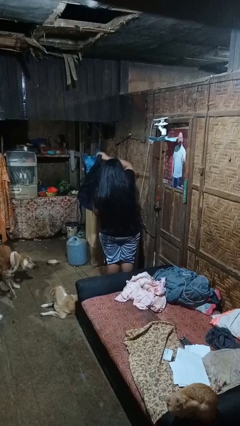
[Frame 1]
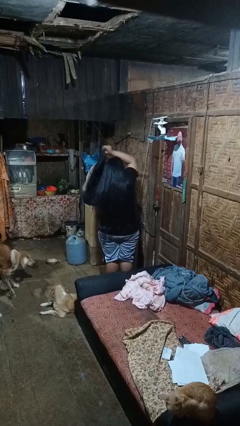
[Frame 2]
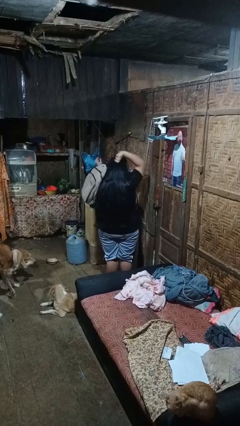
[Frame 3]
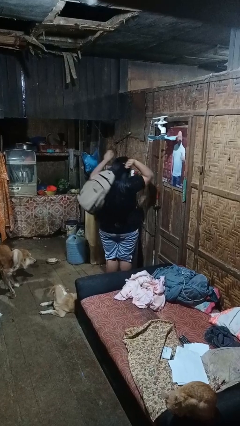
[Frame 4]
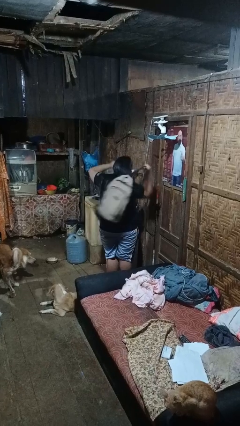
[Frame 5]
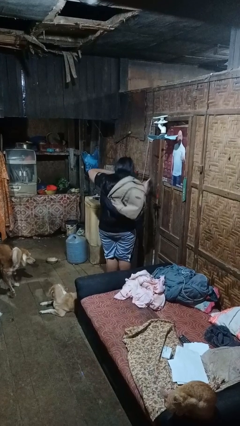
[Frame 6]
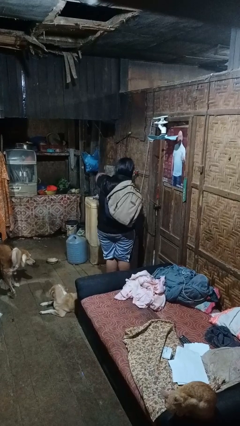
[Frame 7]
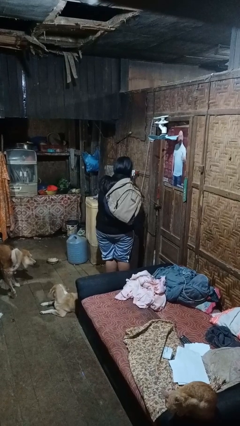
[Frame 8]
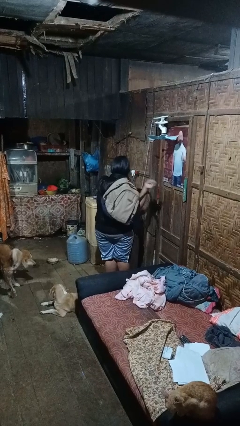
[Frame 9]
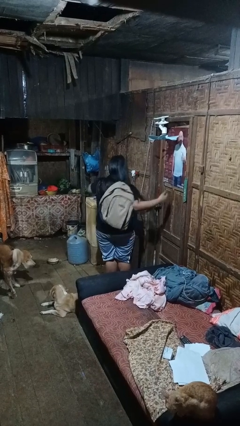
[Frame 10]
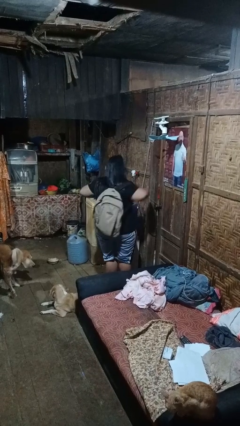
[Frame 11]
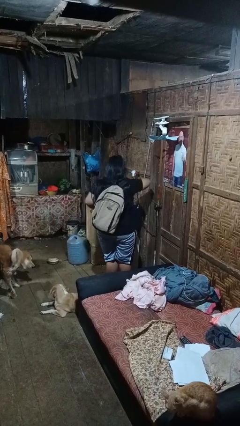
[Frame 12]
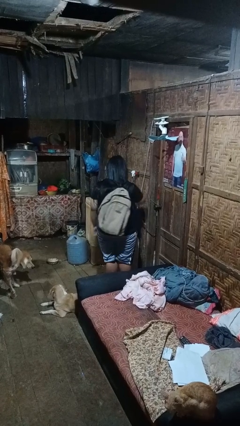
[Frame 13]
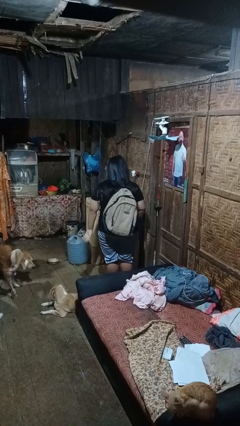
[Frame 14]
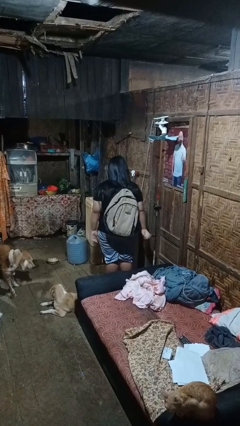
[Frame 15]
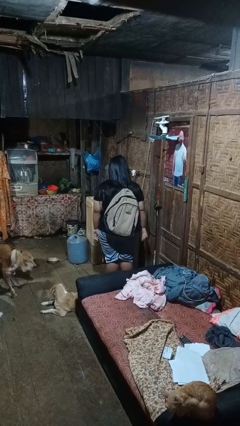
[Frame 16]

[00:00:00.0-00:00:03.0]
person puts on backpack

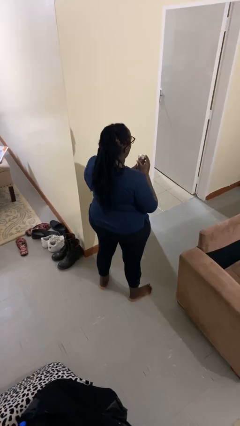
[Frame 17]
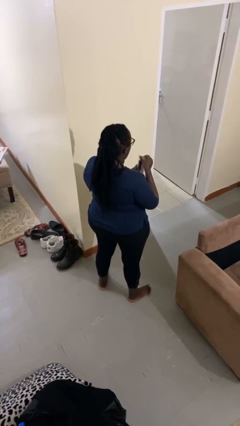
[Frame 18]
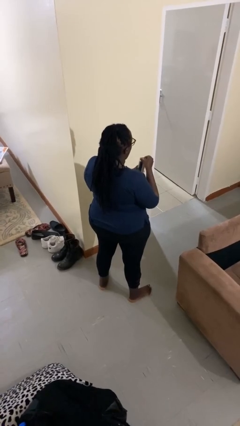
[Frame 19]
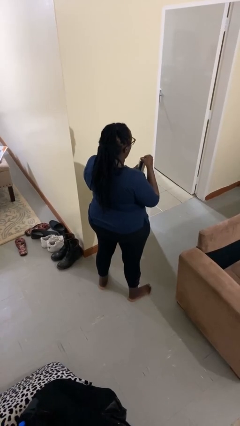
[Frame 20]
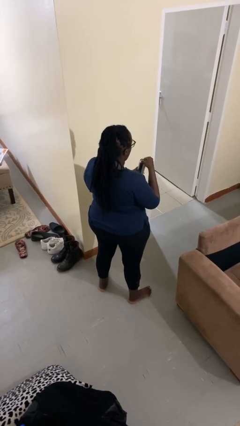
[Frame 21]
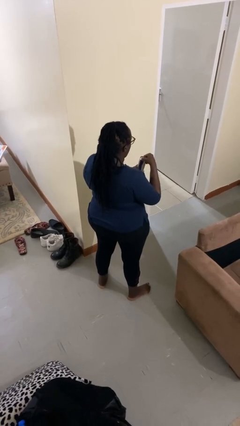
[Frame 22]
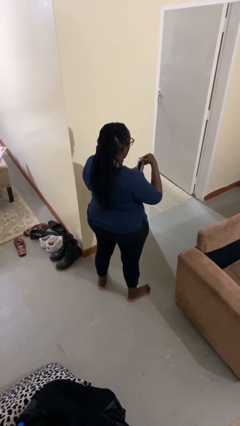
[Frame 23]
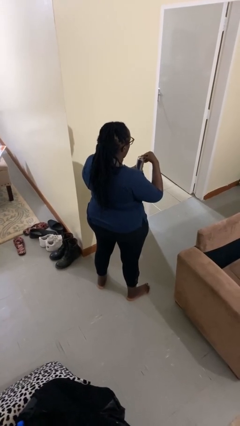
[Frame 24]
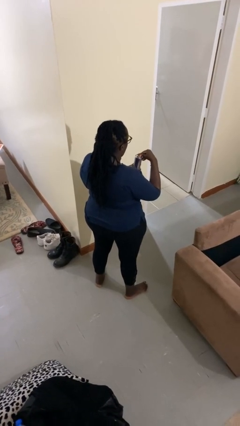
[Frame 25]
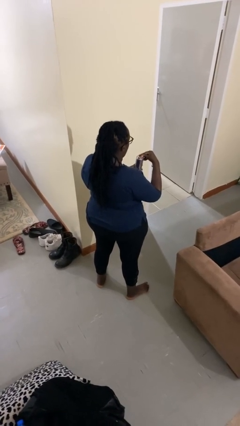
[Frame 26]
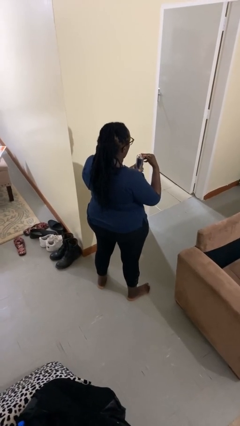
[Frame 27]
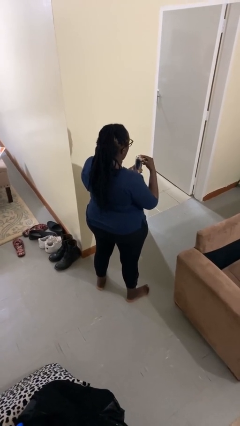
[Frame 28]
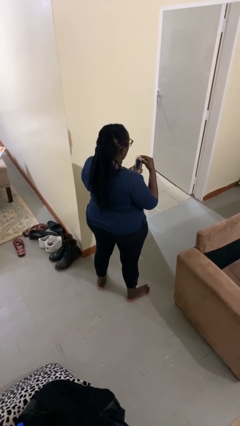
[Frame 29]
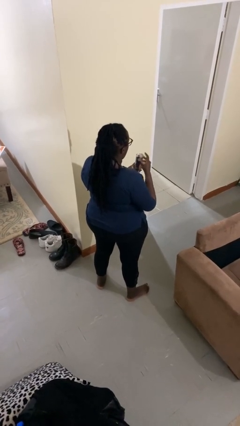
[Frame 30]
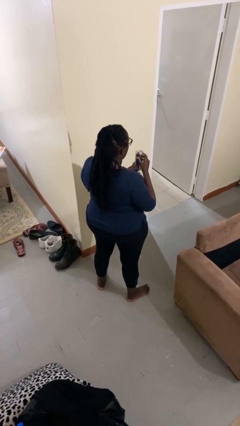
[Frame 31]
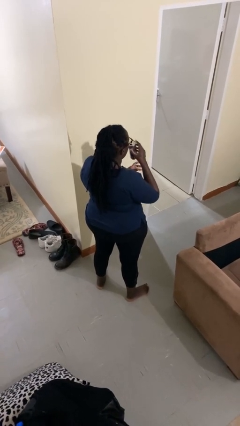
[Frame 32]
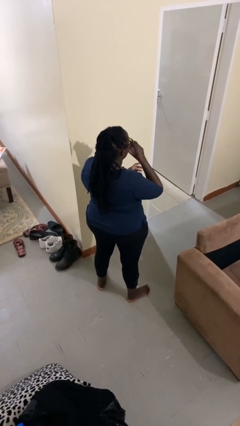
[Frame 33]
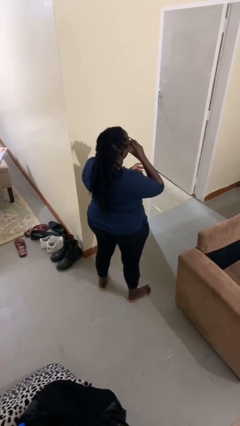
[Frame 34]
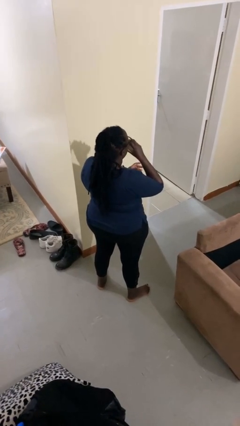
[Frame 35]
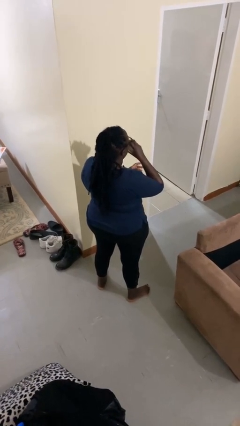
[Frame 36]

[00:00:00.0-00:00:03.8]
person opens beverage can

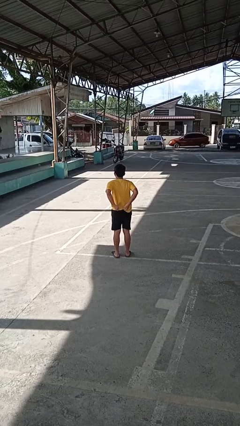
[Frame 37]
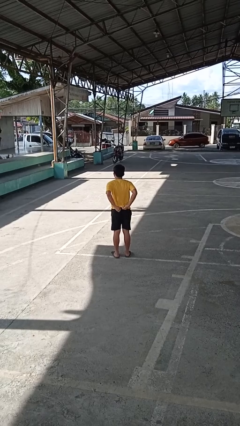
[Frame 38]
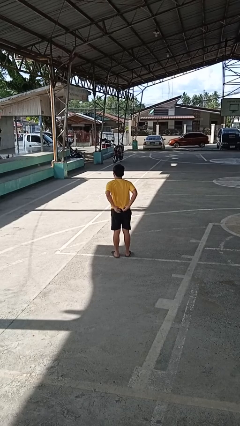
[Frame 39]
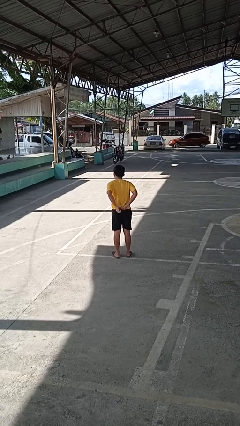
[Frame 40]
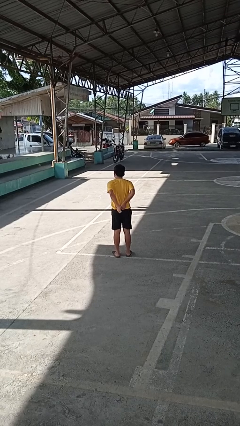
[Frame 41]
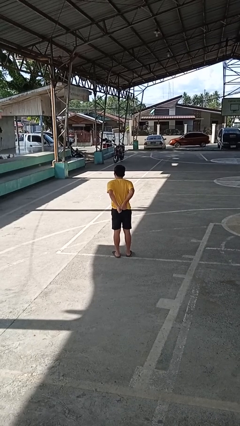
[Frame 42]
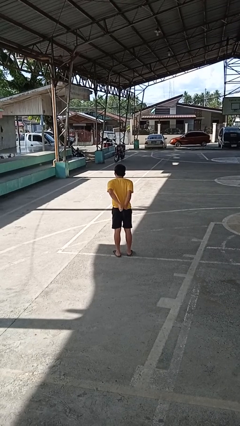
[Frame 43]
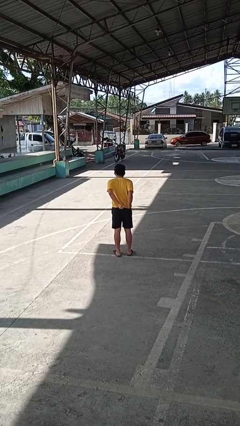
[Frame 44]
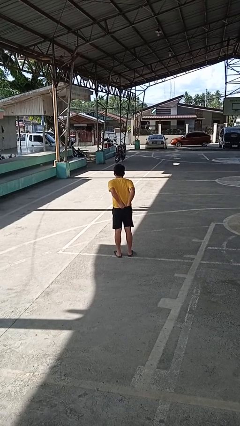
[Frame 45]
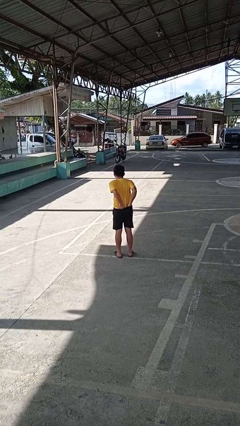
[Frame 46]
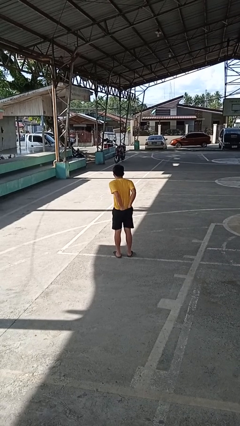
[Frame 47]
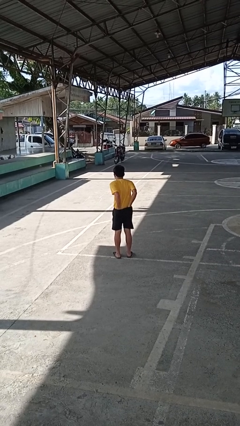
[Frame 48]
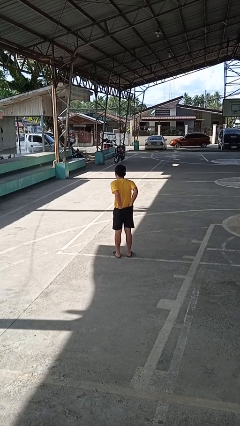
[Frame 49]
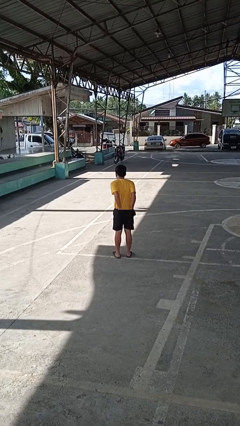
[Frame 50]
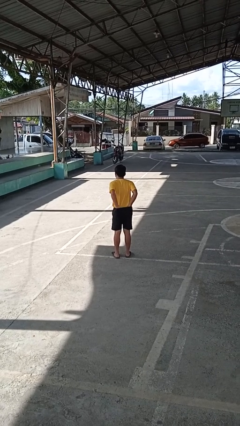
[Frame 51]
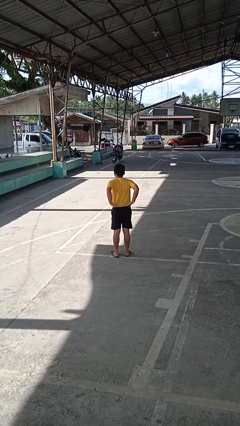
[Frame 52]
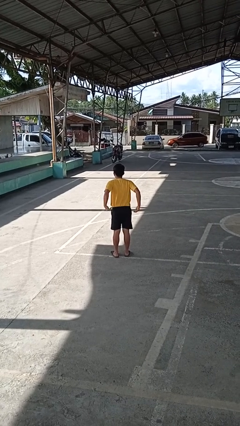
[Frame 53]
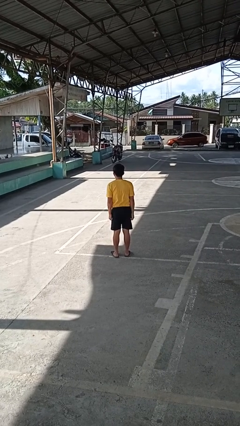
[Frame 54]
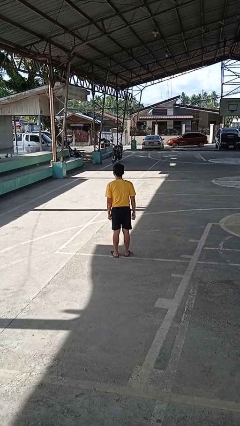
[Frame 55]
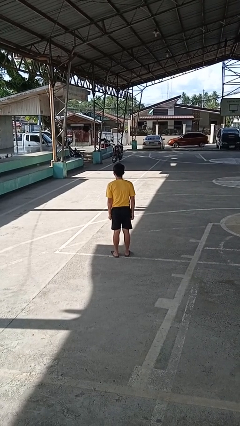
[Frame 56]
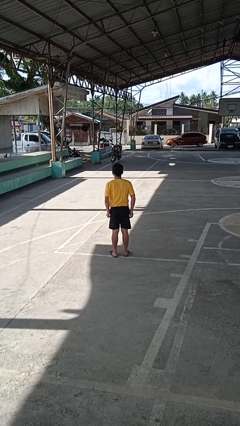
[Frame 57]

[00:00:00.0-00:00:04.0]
person tucks in shirt

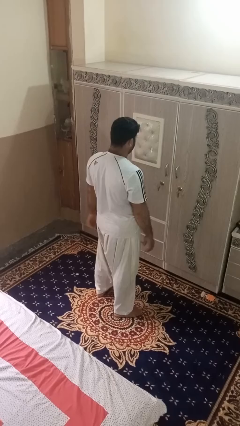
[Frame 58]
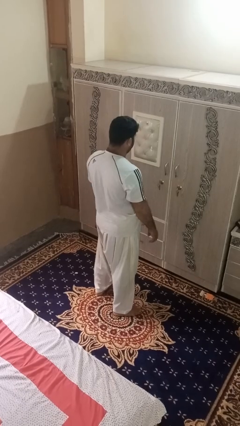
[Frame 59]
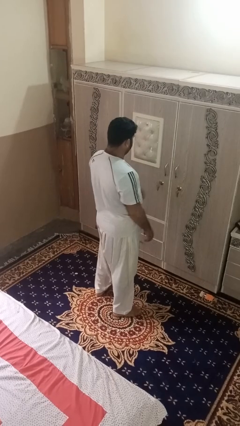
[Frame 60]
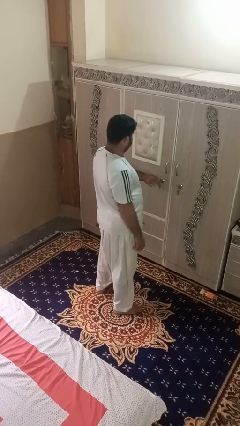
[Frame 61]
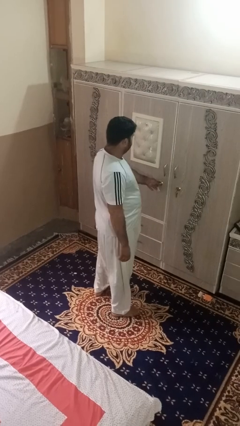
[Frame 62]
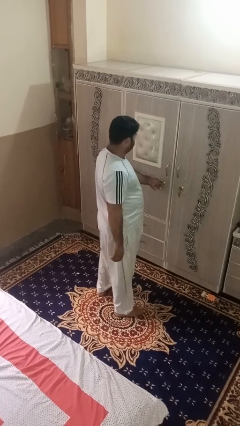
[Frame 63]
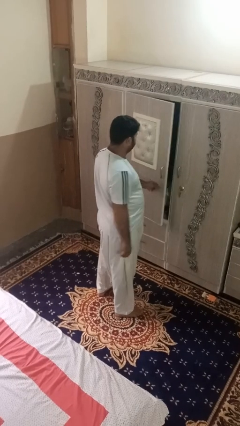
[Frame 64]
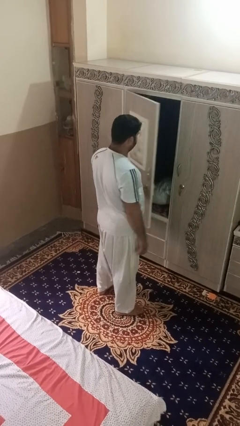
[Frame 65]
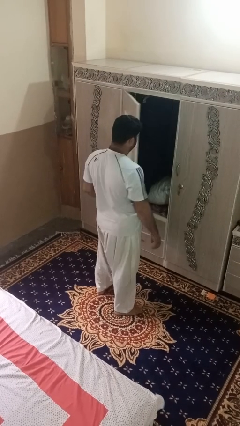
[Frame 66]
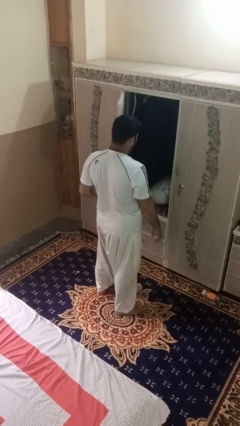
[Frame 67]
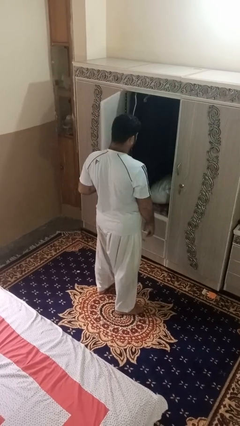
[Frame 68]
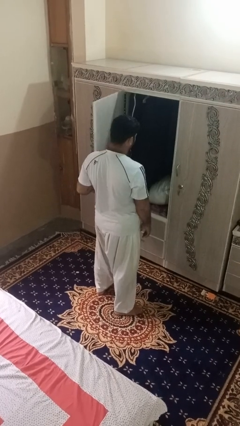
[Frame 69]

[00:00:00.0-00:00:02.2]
person opens dresser drawer

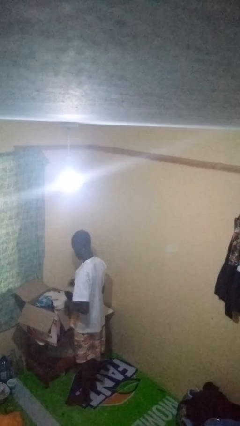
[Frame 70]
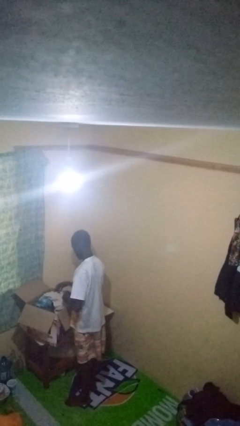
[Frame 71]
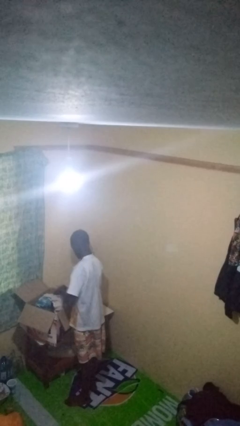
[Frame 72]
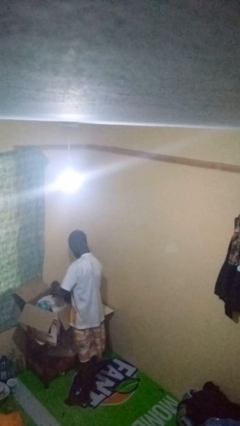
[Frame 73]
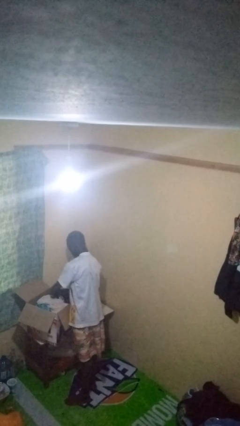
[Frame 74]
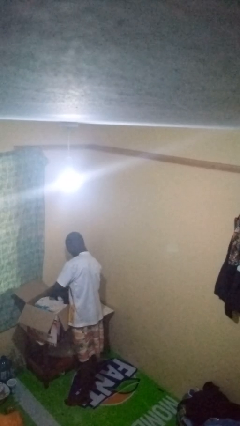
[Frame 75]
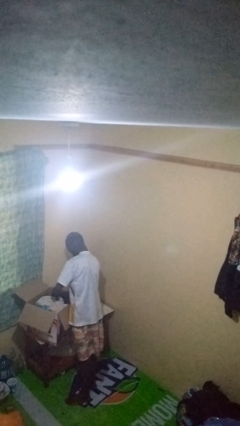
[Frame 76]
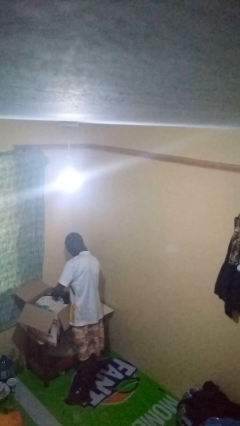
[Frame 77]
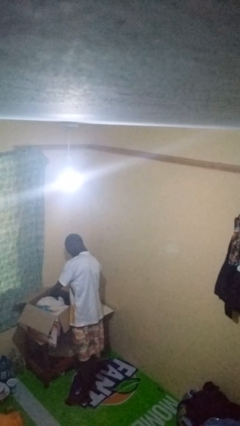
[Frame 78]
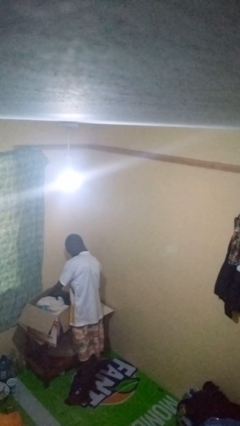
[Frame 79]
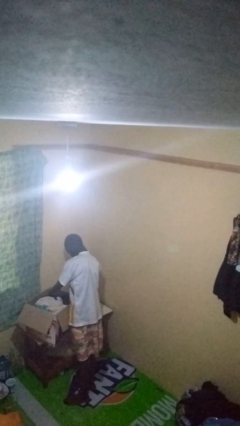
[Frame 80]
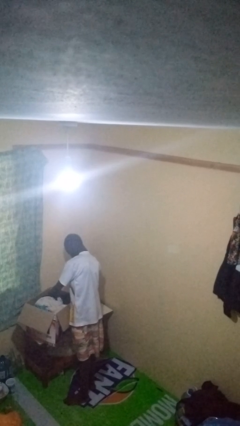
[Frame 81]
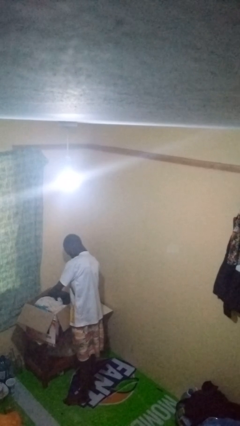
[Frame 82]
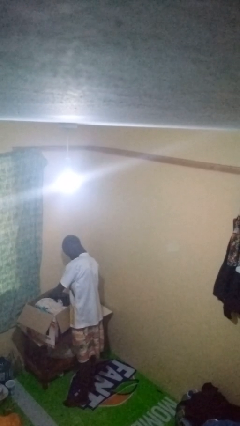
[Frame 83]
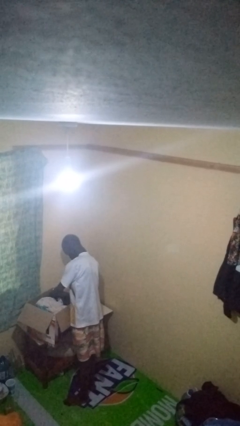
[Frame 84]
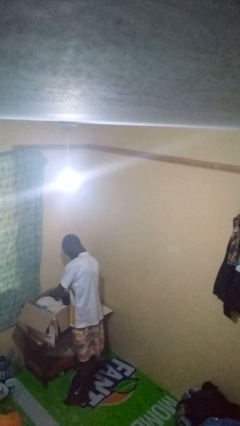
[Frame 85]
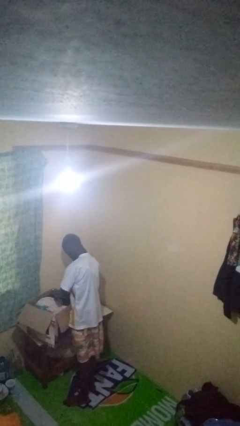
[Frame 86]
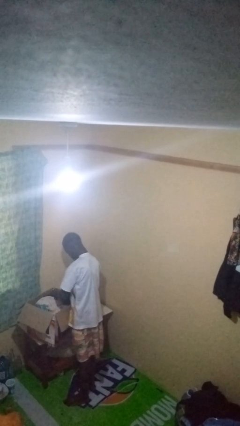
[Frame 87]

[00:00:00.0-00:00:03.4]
person searches in box

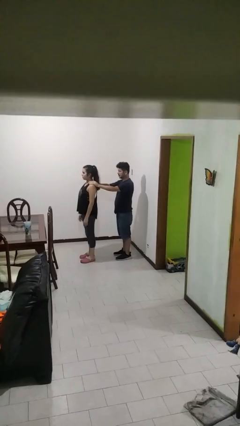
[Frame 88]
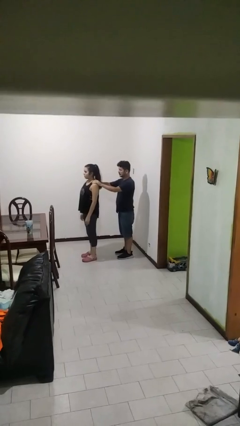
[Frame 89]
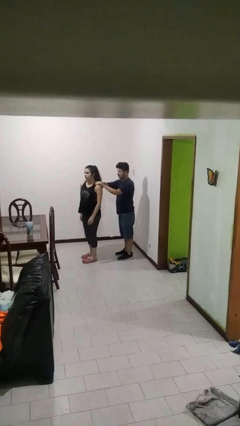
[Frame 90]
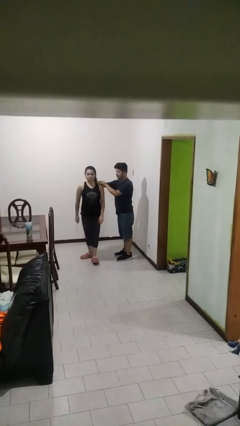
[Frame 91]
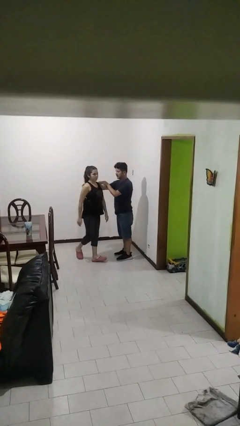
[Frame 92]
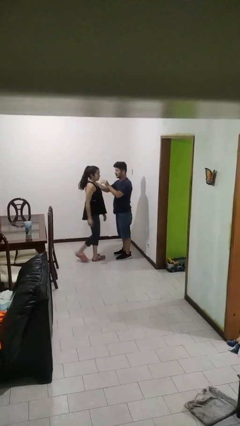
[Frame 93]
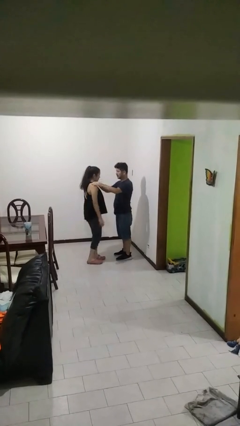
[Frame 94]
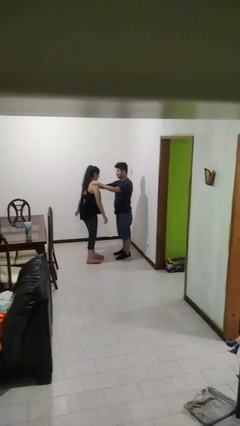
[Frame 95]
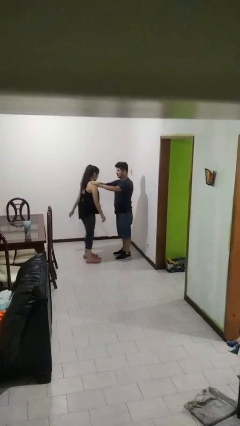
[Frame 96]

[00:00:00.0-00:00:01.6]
person spins person around
